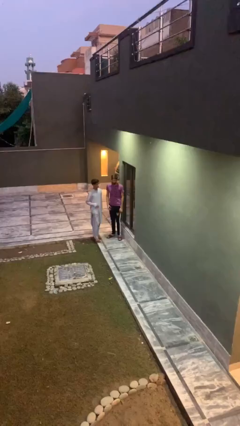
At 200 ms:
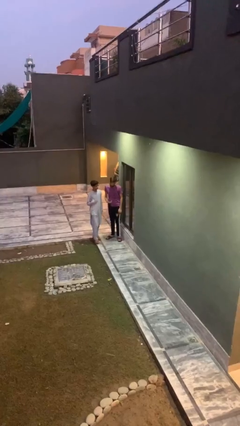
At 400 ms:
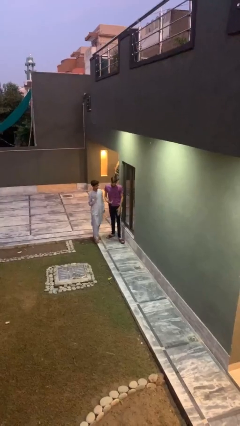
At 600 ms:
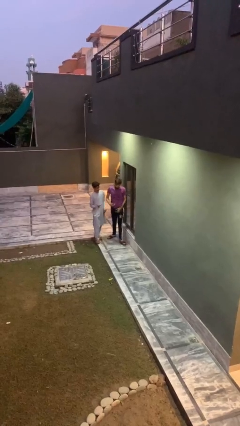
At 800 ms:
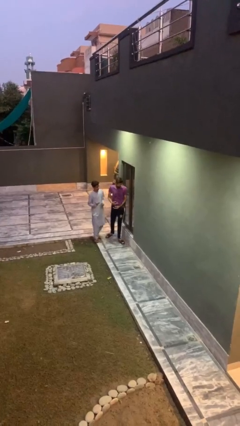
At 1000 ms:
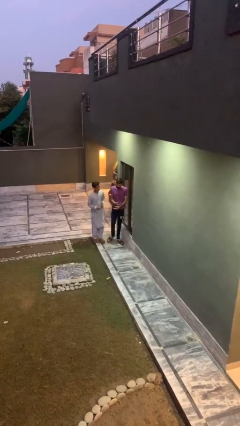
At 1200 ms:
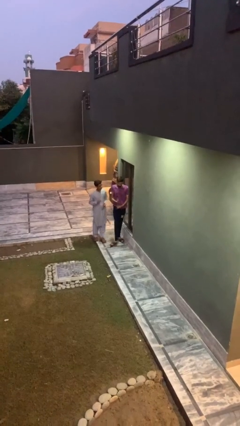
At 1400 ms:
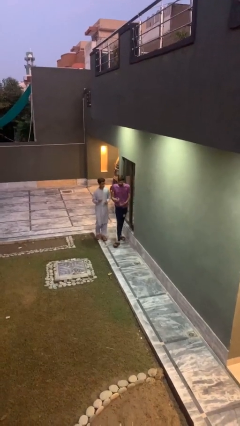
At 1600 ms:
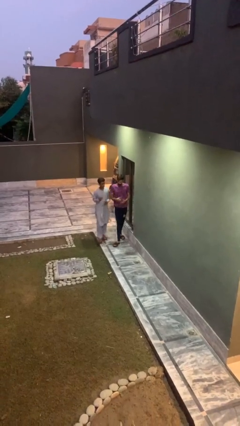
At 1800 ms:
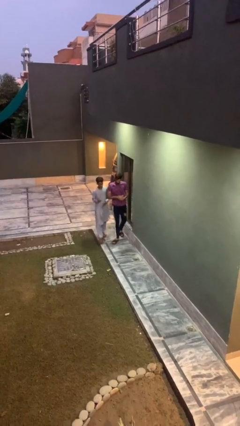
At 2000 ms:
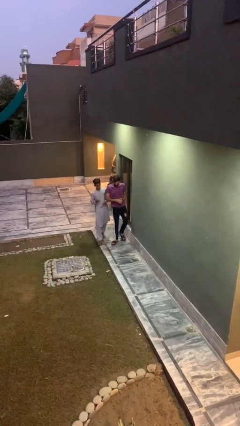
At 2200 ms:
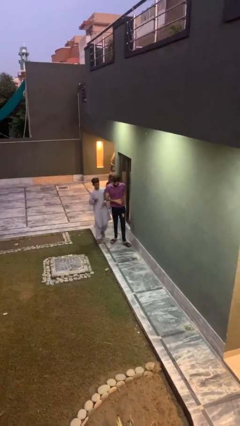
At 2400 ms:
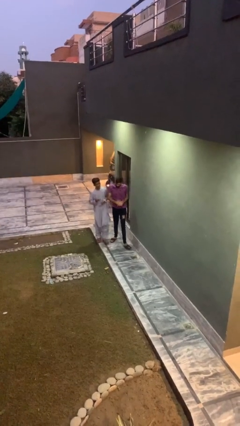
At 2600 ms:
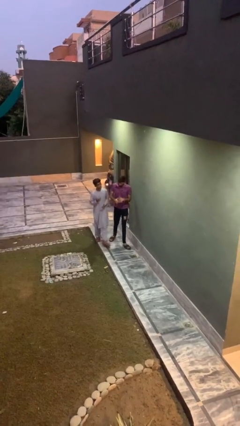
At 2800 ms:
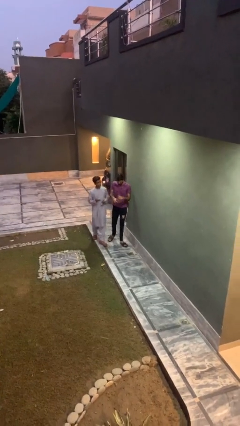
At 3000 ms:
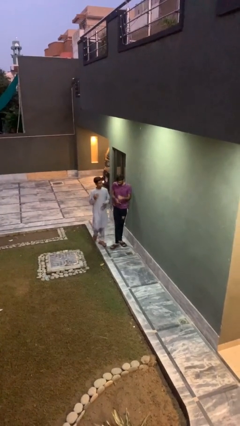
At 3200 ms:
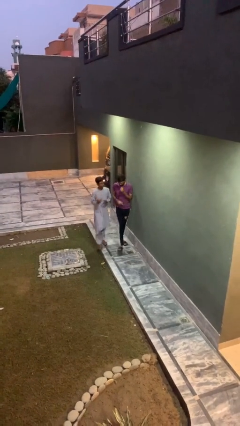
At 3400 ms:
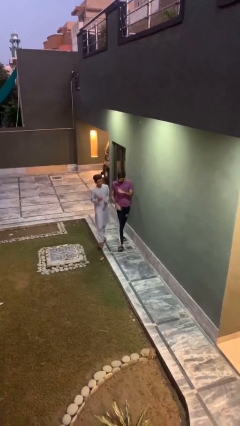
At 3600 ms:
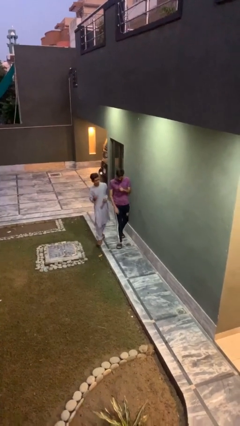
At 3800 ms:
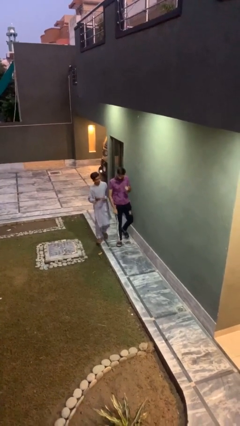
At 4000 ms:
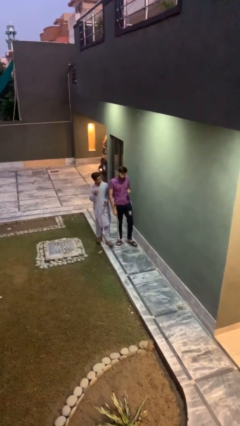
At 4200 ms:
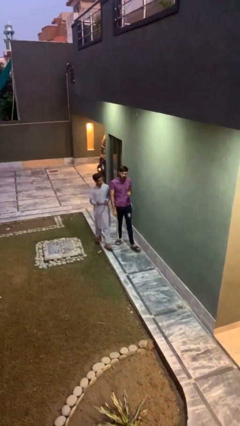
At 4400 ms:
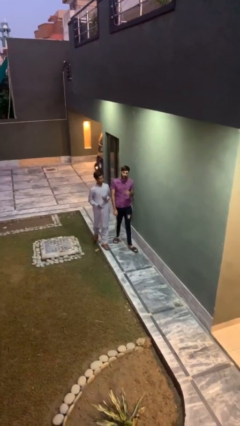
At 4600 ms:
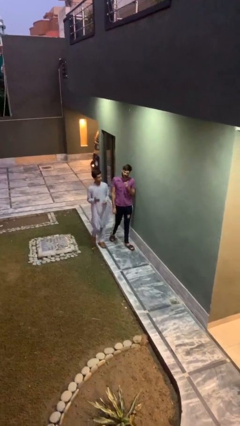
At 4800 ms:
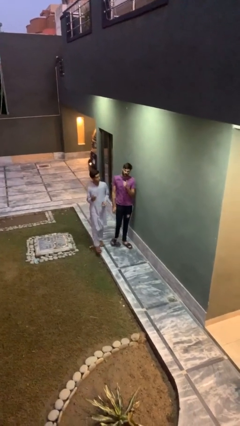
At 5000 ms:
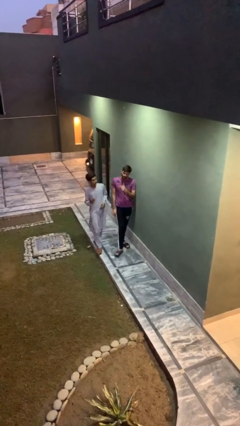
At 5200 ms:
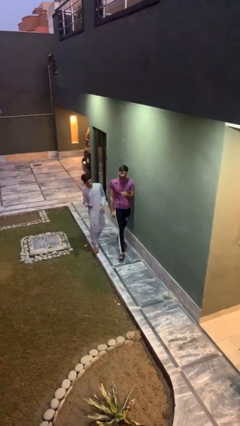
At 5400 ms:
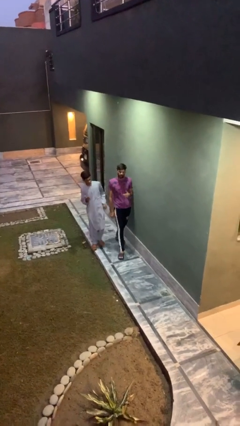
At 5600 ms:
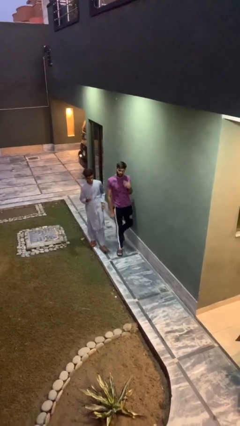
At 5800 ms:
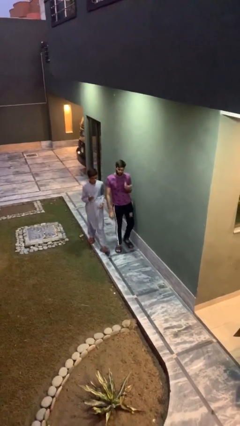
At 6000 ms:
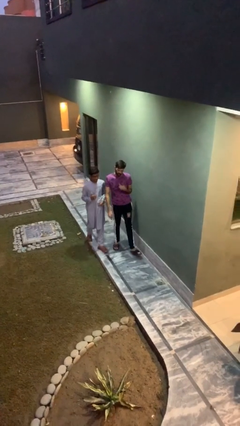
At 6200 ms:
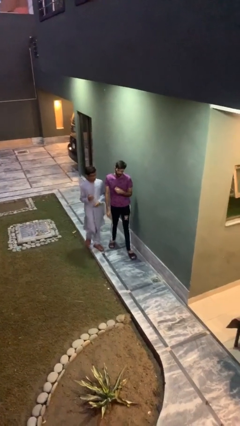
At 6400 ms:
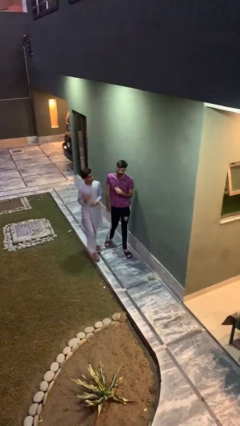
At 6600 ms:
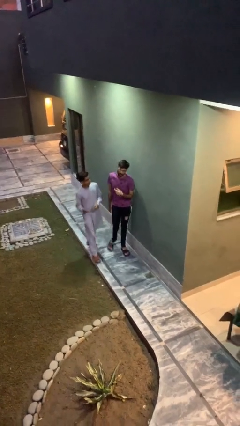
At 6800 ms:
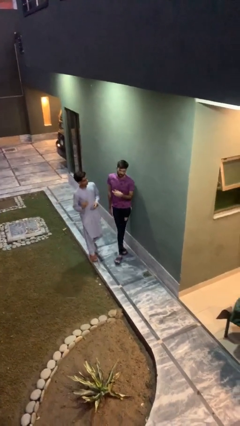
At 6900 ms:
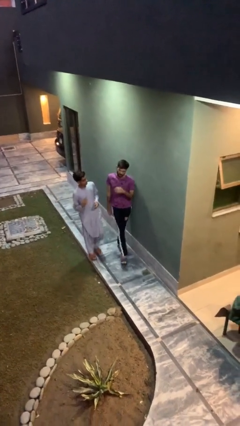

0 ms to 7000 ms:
person talks to person

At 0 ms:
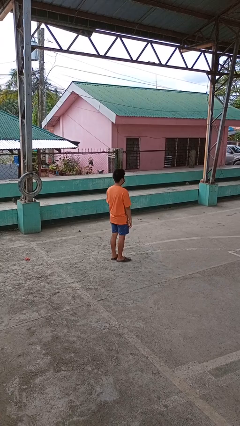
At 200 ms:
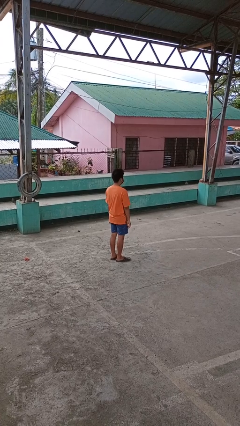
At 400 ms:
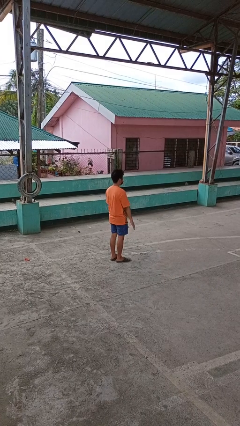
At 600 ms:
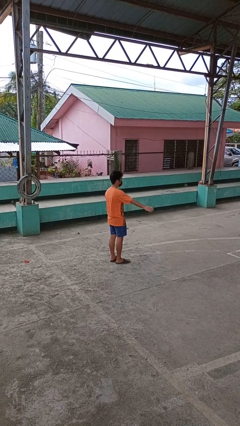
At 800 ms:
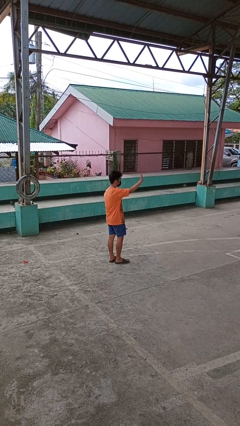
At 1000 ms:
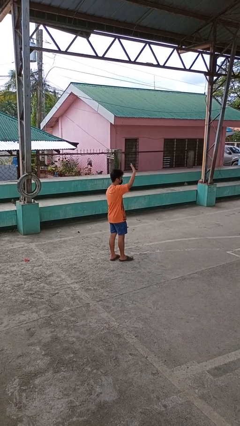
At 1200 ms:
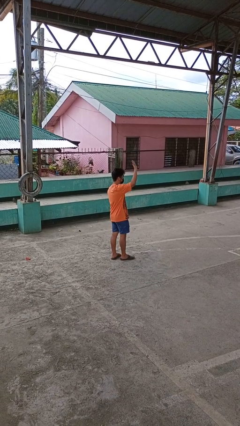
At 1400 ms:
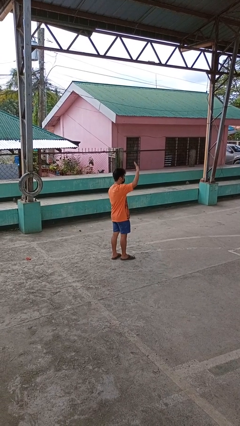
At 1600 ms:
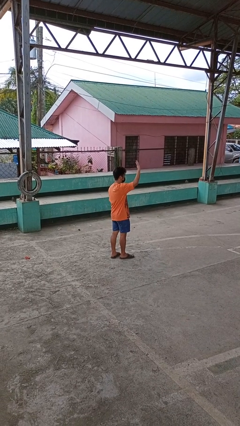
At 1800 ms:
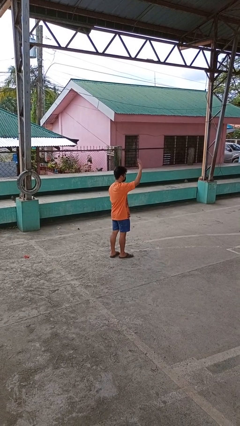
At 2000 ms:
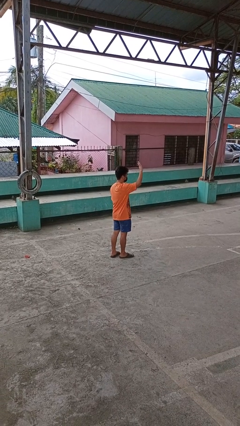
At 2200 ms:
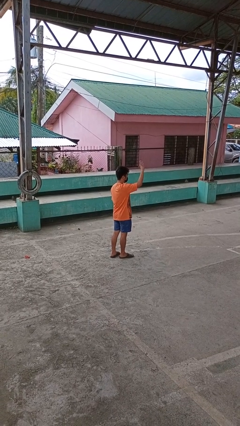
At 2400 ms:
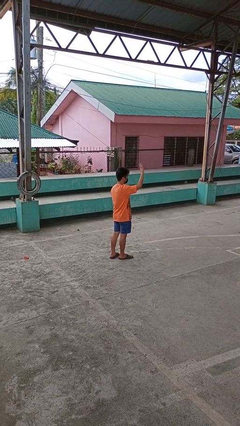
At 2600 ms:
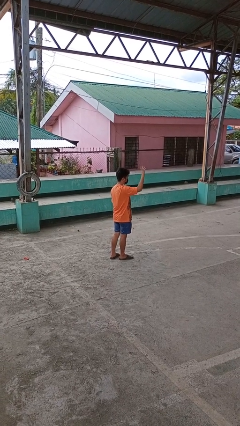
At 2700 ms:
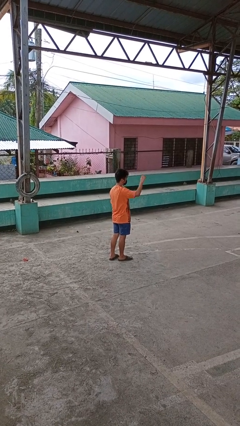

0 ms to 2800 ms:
person waves at person

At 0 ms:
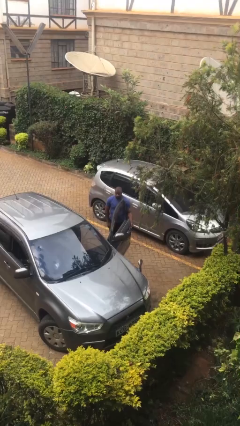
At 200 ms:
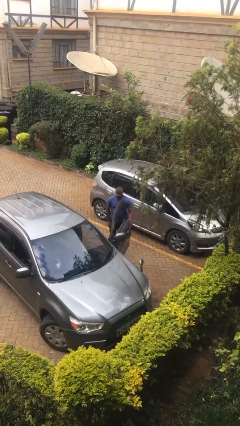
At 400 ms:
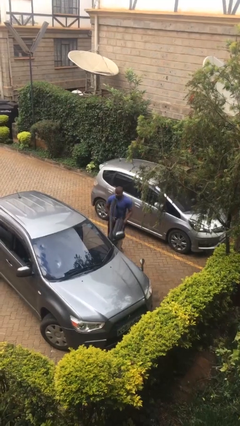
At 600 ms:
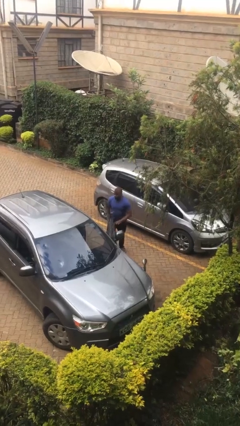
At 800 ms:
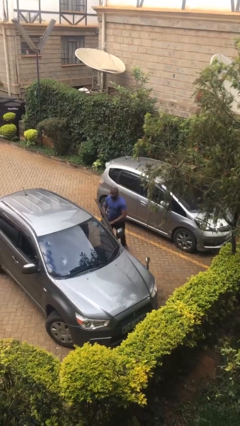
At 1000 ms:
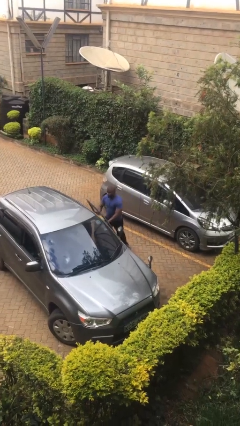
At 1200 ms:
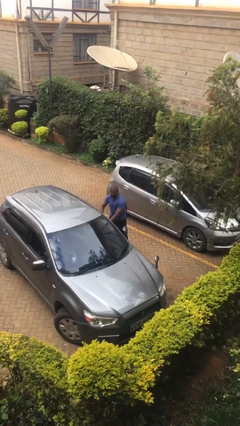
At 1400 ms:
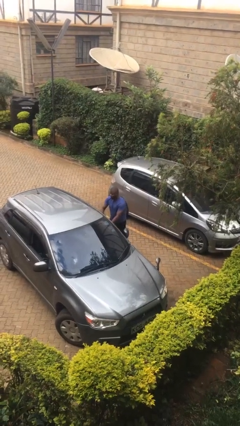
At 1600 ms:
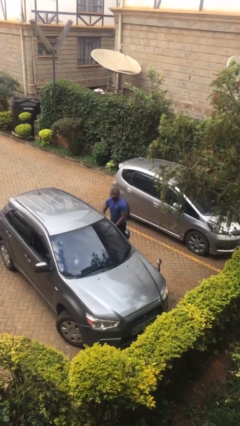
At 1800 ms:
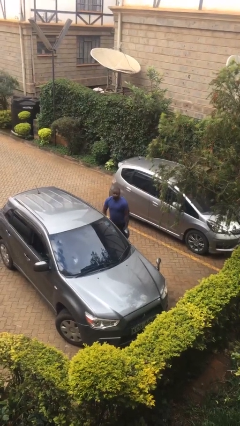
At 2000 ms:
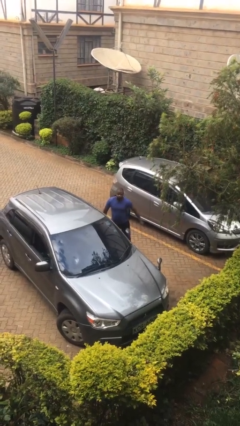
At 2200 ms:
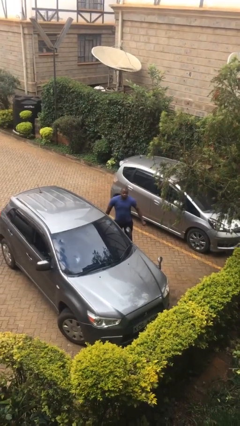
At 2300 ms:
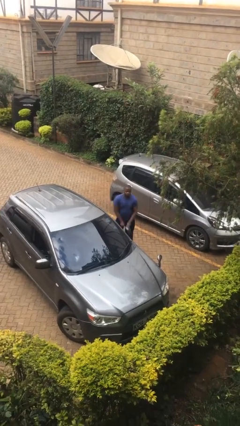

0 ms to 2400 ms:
person closes car door

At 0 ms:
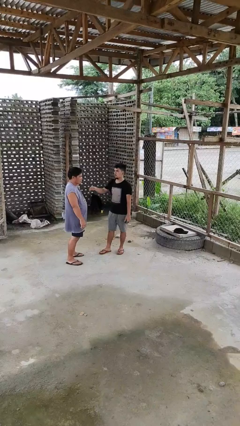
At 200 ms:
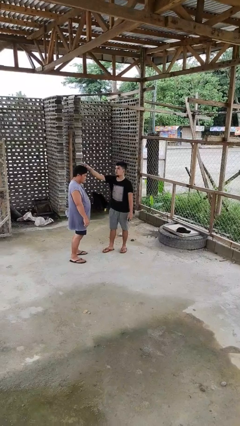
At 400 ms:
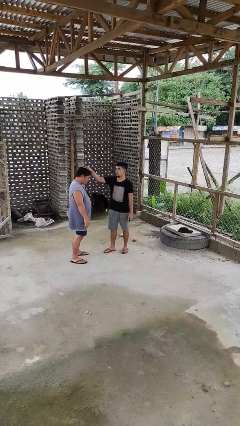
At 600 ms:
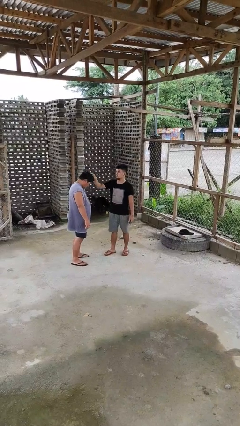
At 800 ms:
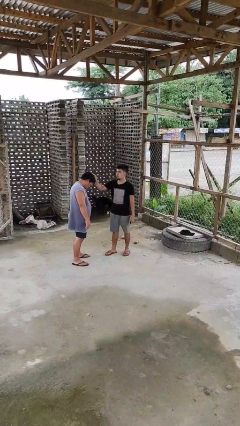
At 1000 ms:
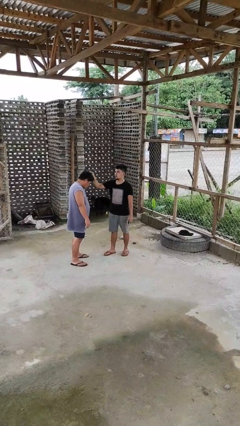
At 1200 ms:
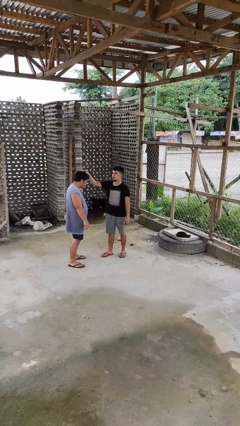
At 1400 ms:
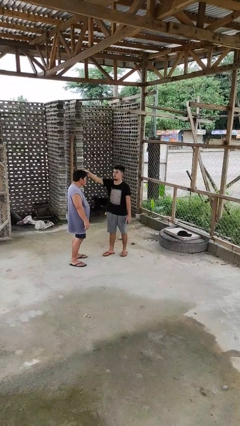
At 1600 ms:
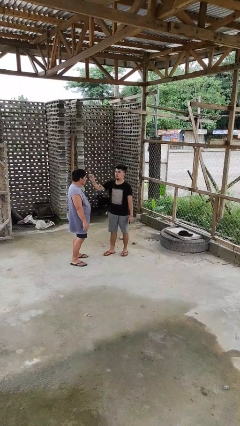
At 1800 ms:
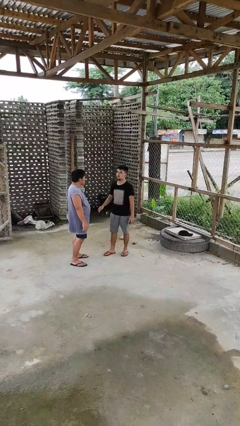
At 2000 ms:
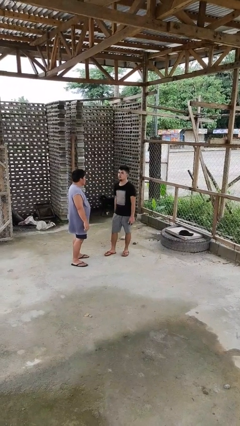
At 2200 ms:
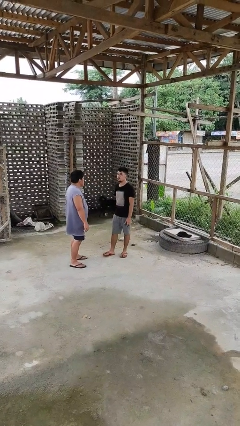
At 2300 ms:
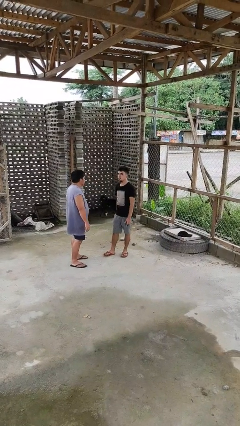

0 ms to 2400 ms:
person grabs person by hair

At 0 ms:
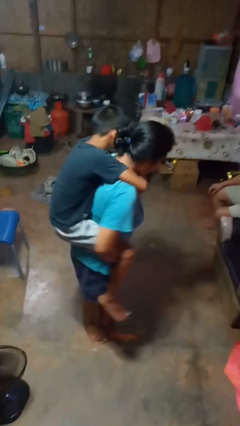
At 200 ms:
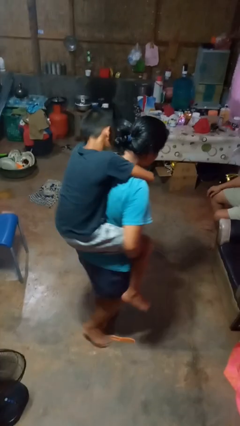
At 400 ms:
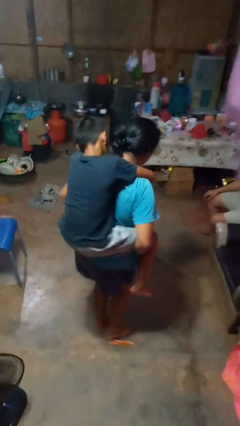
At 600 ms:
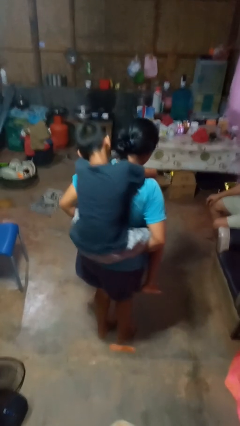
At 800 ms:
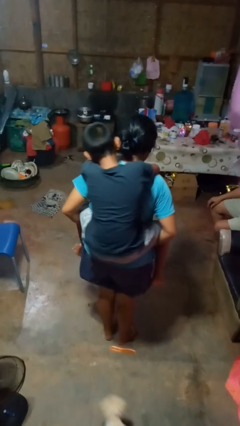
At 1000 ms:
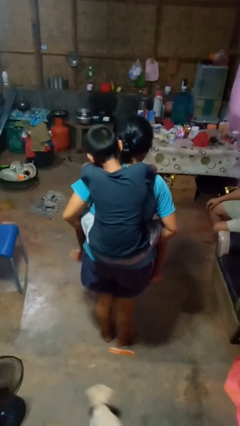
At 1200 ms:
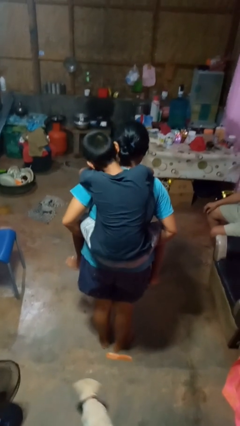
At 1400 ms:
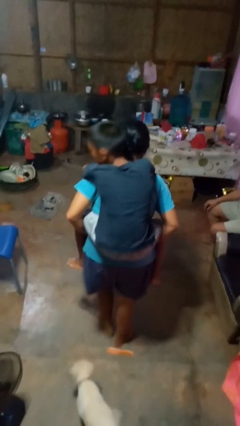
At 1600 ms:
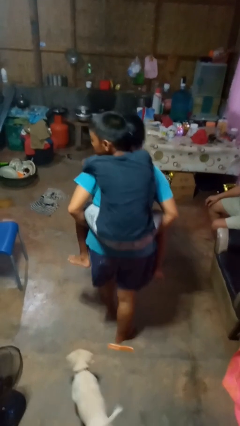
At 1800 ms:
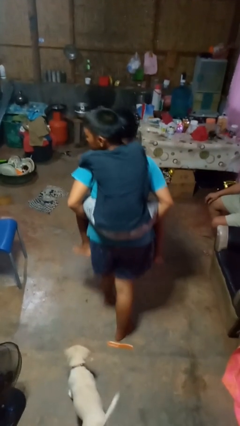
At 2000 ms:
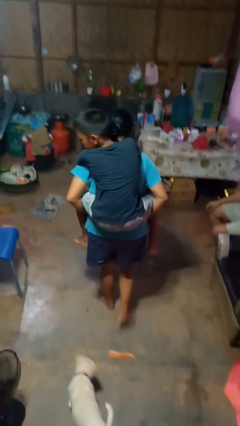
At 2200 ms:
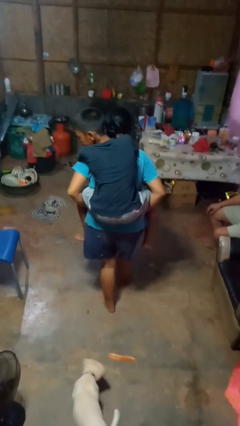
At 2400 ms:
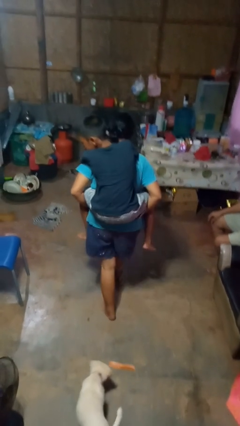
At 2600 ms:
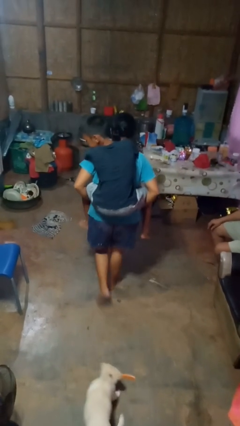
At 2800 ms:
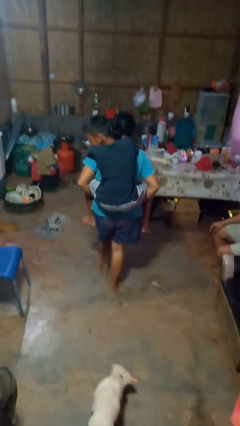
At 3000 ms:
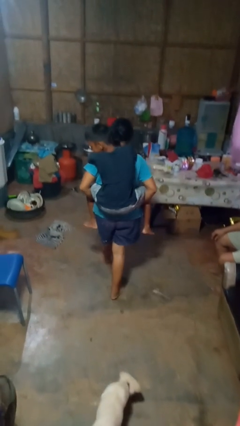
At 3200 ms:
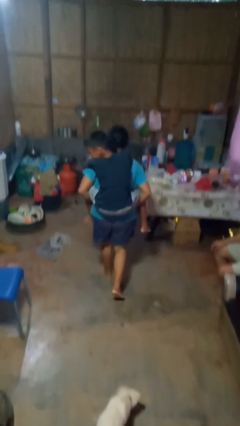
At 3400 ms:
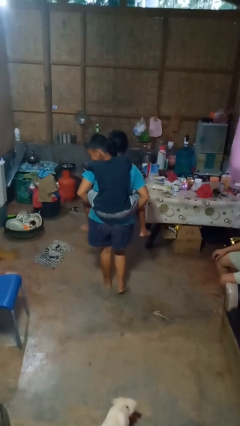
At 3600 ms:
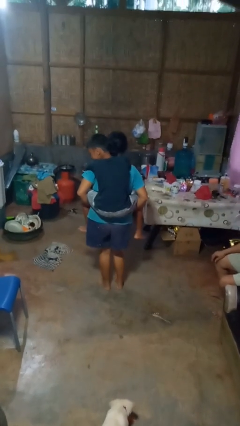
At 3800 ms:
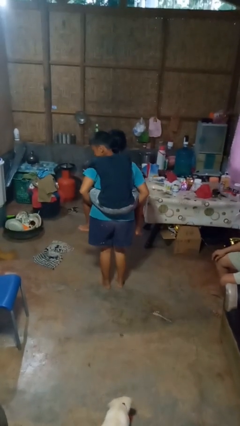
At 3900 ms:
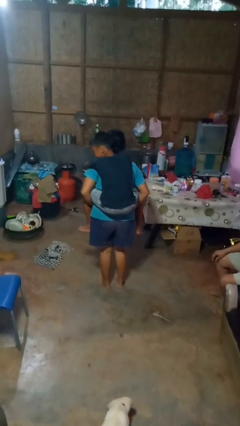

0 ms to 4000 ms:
person carries person on back
